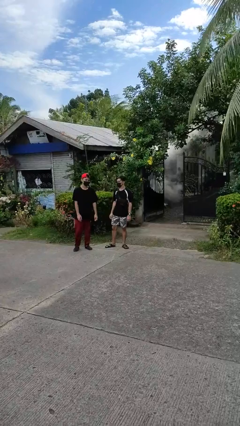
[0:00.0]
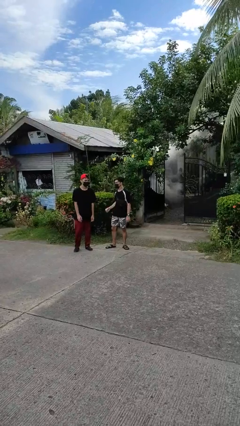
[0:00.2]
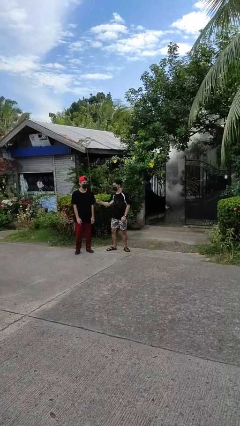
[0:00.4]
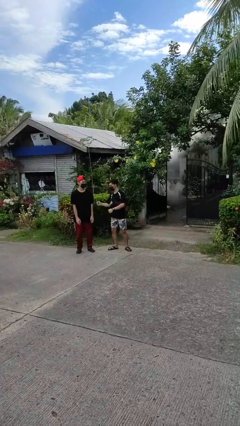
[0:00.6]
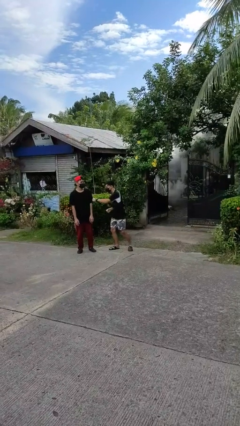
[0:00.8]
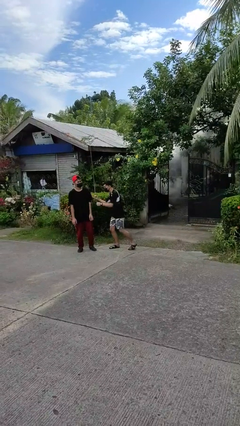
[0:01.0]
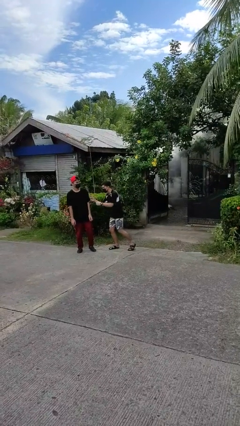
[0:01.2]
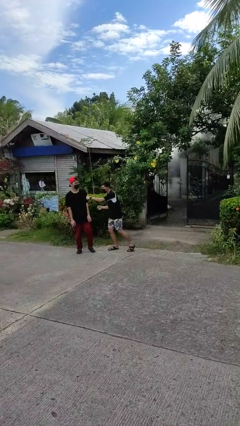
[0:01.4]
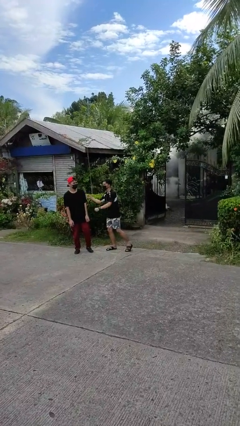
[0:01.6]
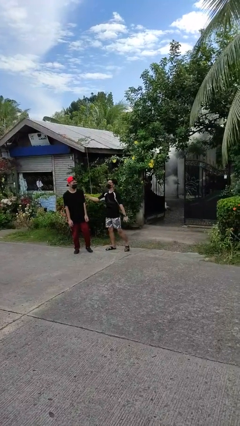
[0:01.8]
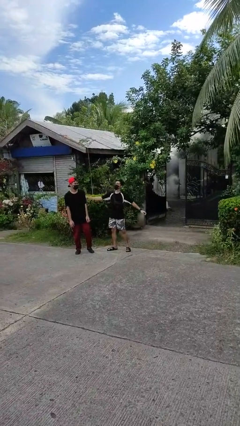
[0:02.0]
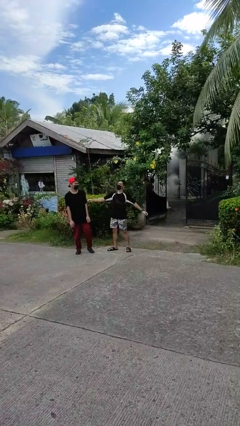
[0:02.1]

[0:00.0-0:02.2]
person pounds shoulders of person

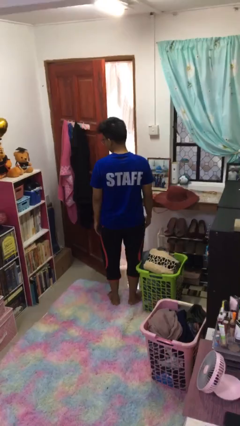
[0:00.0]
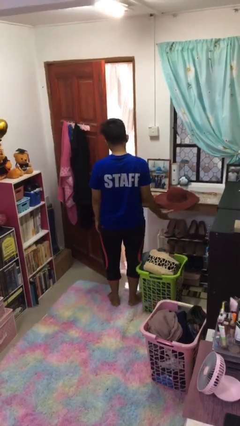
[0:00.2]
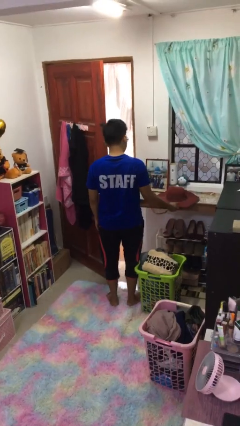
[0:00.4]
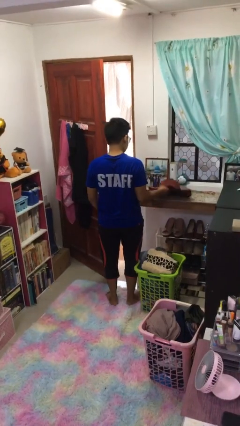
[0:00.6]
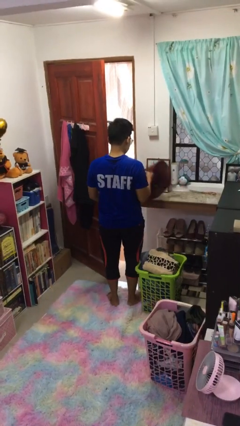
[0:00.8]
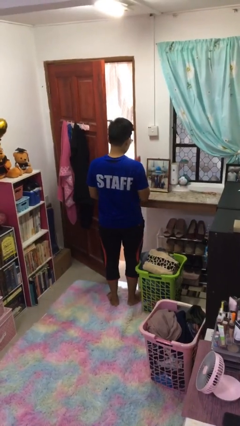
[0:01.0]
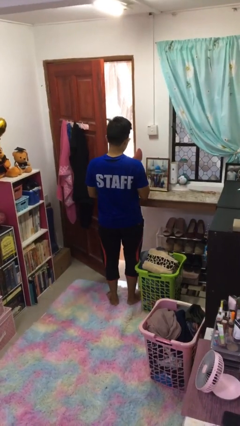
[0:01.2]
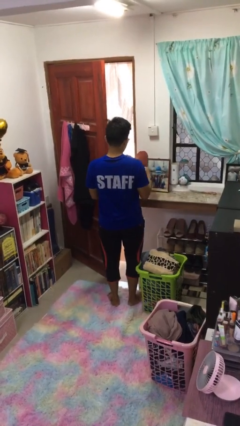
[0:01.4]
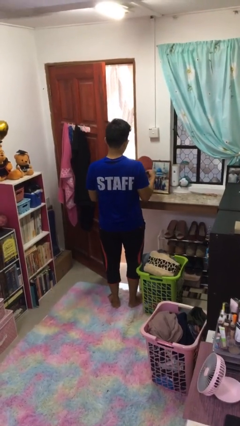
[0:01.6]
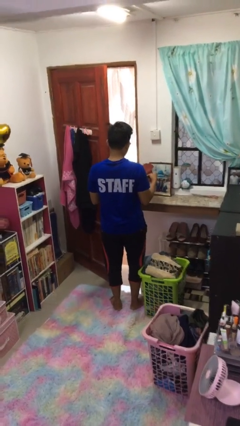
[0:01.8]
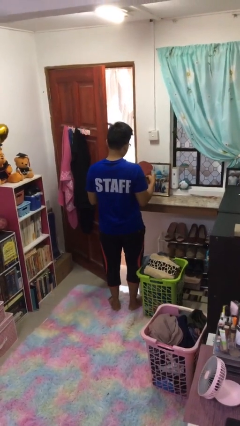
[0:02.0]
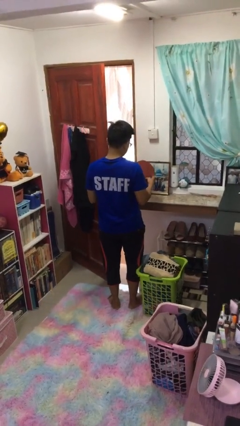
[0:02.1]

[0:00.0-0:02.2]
person picks up object from countertop

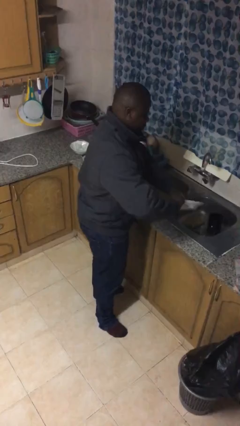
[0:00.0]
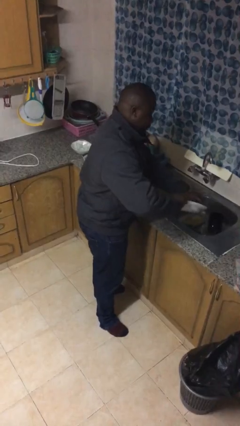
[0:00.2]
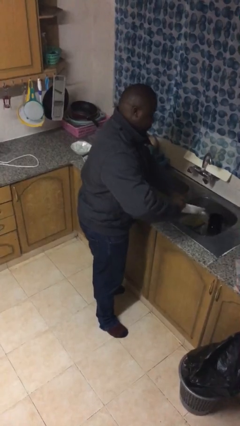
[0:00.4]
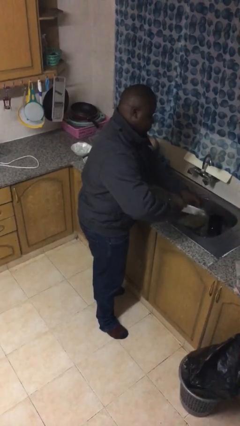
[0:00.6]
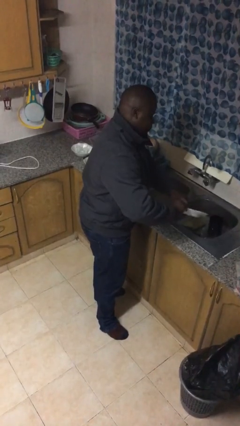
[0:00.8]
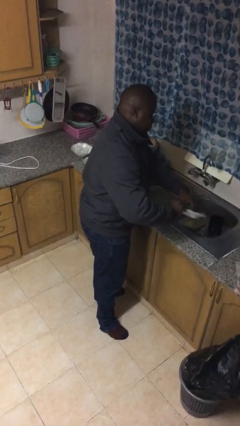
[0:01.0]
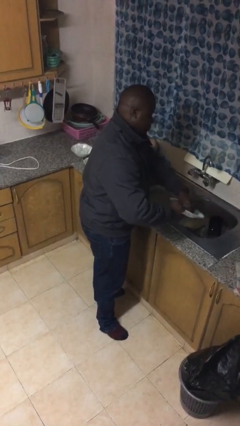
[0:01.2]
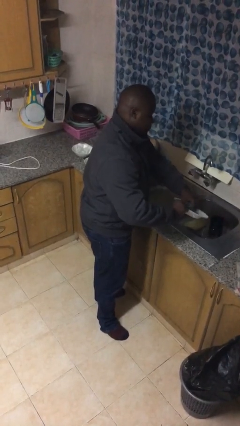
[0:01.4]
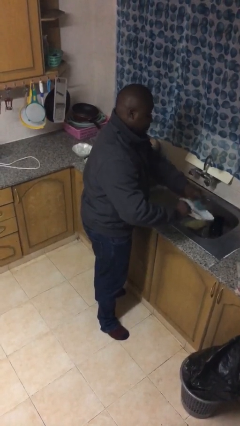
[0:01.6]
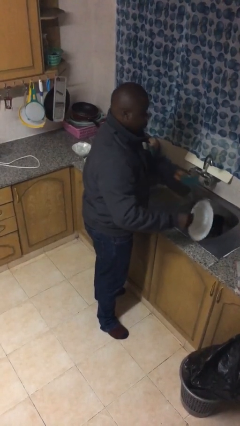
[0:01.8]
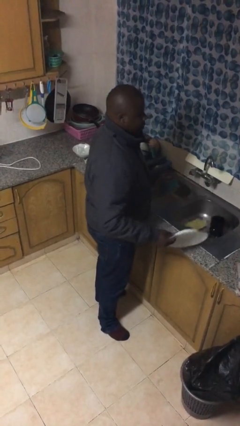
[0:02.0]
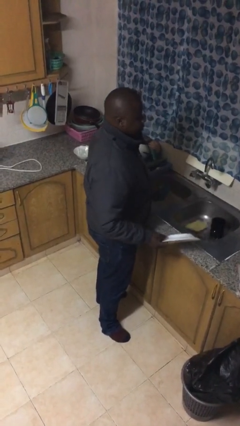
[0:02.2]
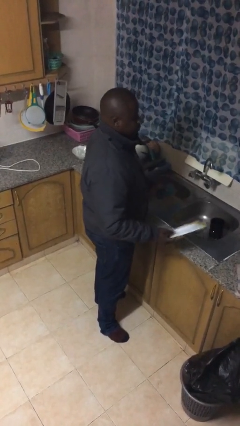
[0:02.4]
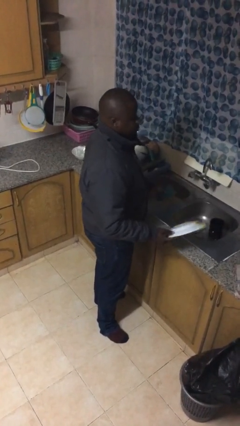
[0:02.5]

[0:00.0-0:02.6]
person washes dish

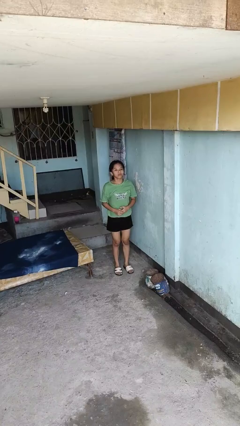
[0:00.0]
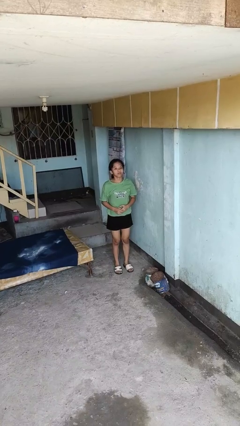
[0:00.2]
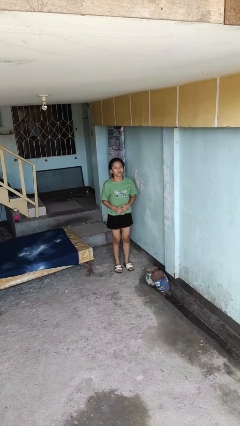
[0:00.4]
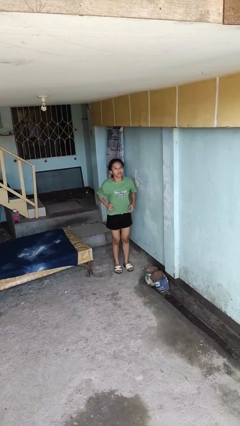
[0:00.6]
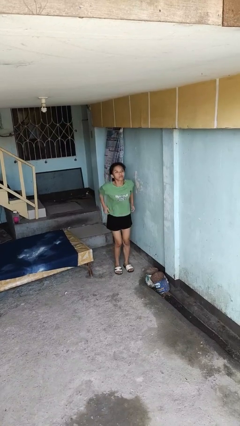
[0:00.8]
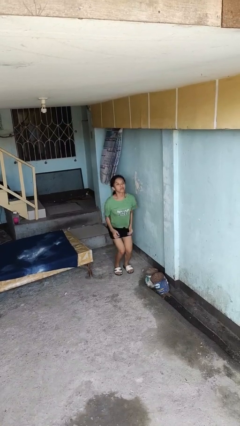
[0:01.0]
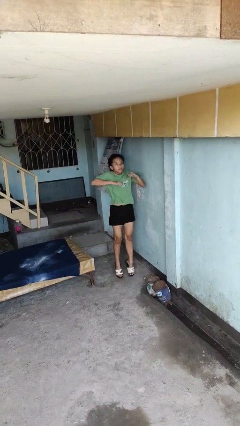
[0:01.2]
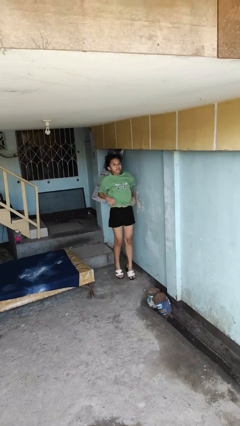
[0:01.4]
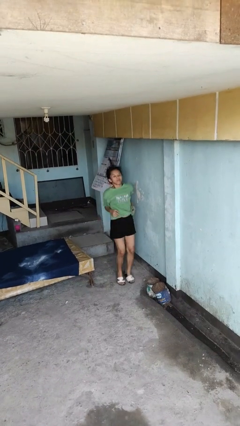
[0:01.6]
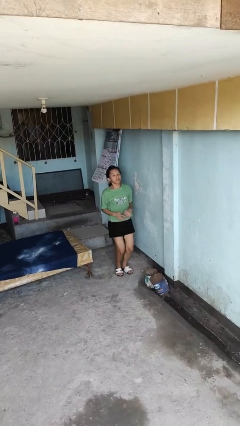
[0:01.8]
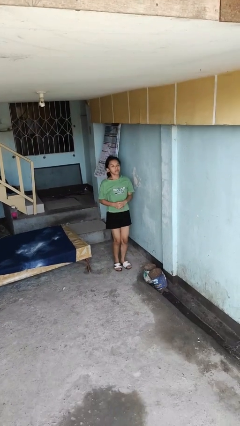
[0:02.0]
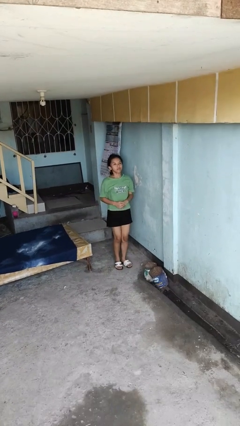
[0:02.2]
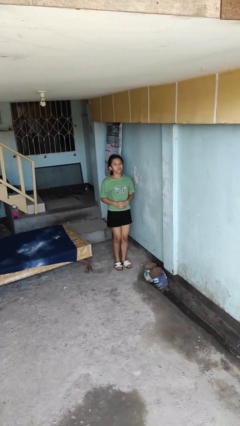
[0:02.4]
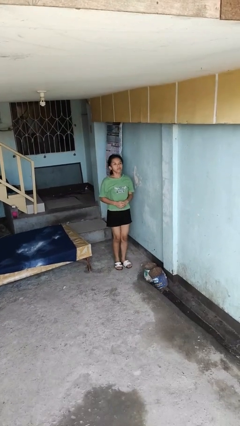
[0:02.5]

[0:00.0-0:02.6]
person jumps

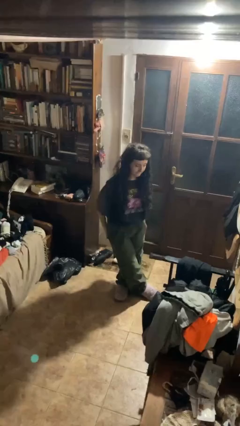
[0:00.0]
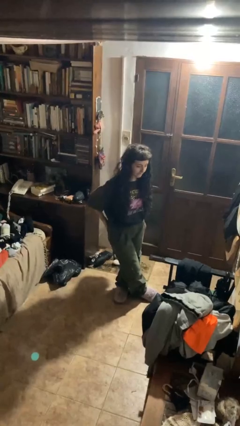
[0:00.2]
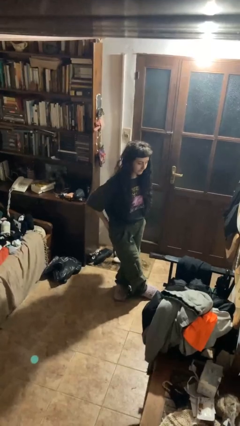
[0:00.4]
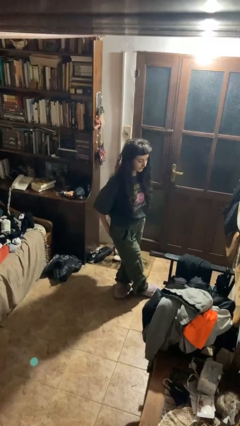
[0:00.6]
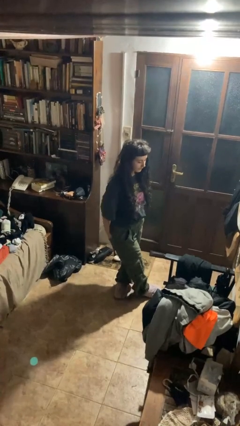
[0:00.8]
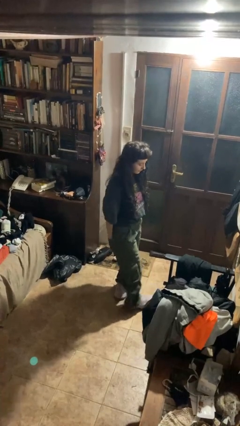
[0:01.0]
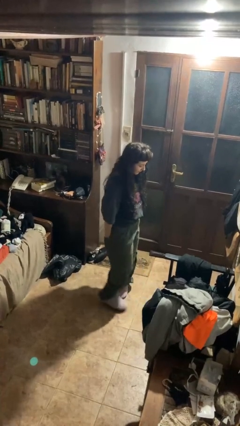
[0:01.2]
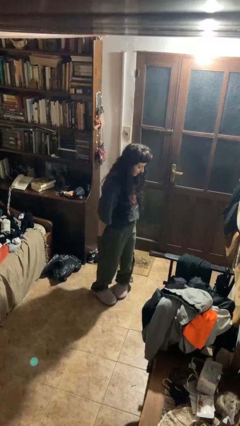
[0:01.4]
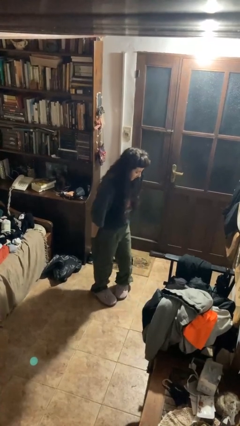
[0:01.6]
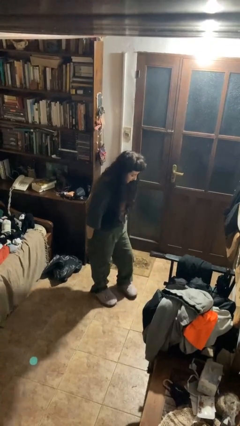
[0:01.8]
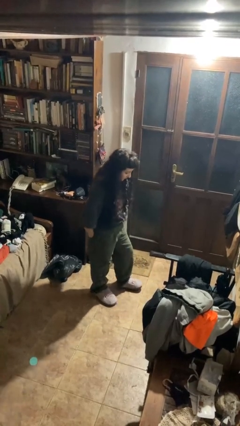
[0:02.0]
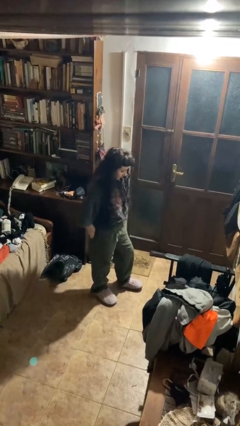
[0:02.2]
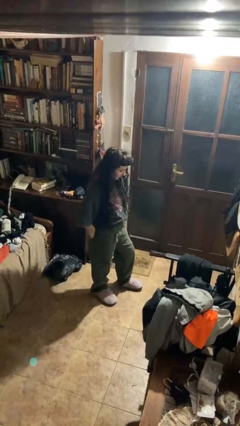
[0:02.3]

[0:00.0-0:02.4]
person puts hands in back pockets

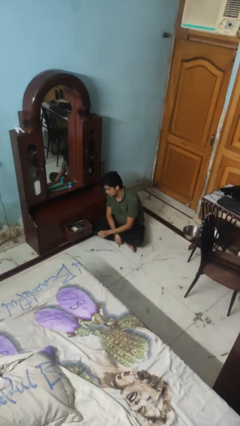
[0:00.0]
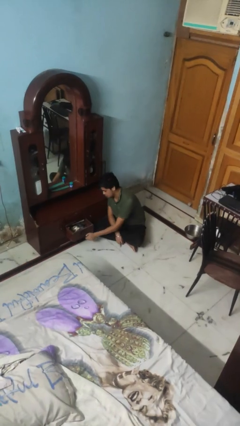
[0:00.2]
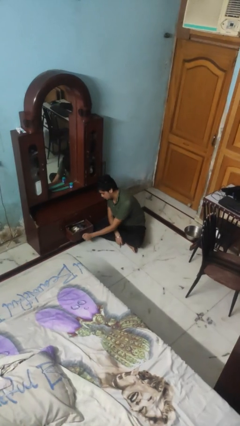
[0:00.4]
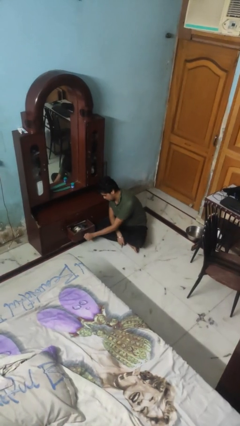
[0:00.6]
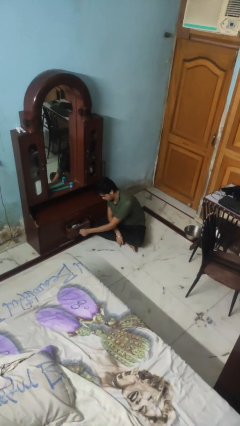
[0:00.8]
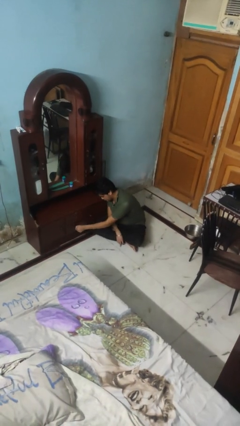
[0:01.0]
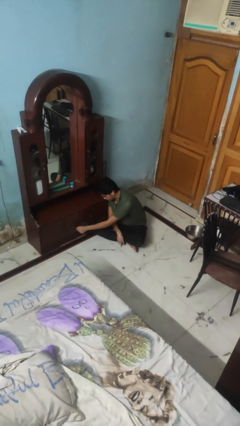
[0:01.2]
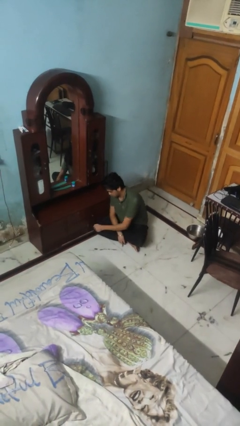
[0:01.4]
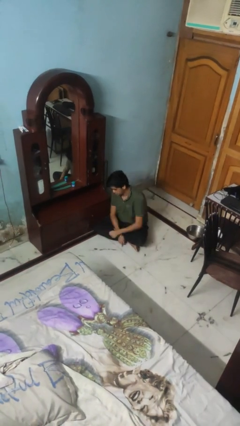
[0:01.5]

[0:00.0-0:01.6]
person closes dresser drawer

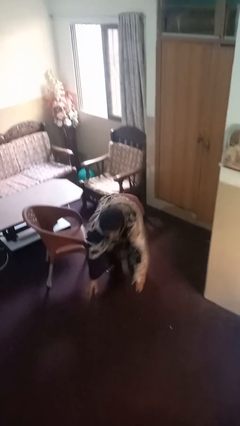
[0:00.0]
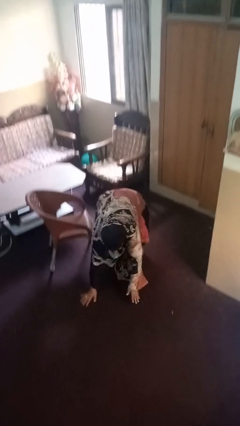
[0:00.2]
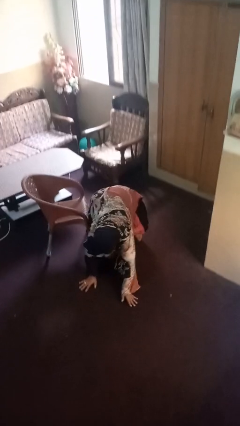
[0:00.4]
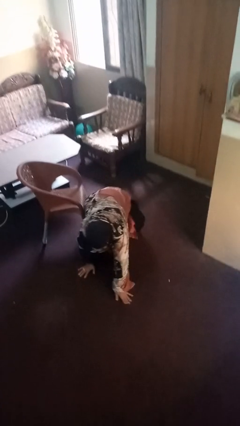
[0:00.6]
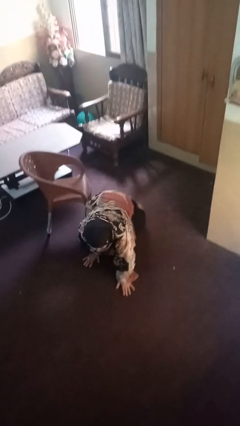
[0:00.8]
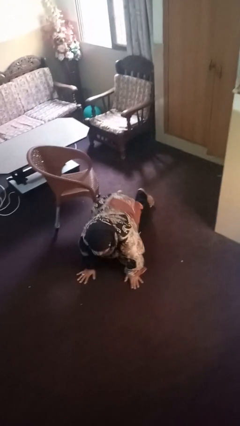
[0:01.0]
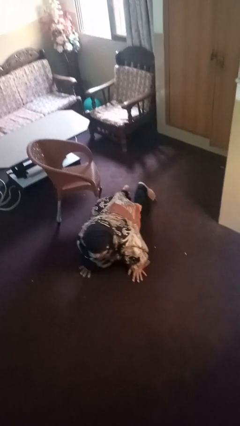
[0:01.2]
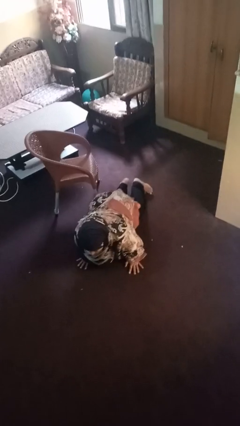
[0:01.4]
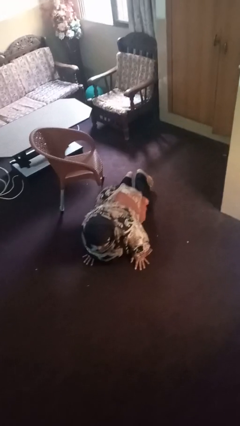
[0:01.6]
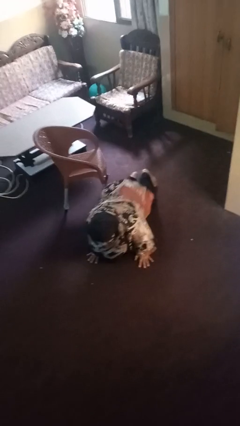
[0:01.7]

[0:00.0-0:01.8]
person lies down on floor

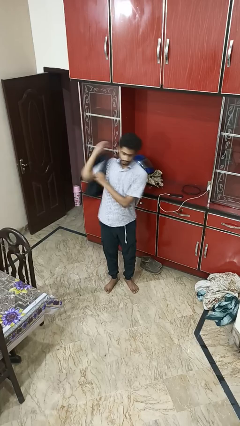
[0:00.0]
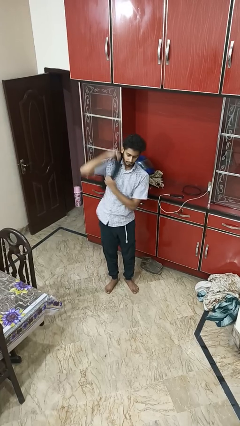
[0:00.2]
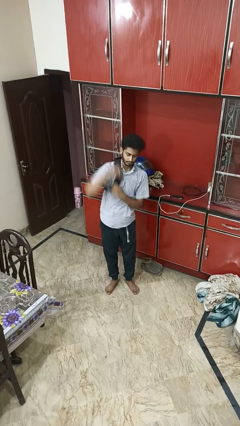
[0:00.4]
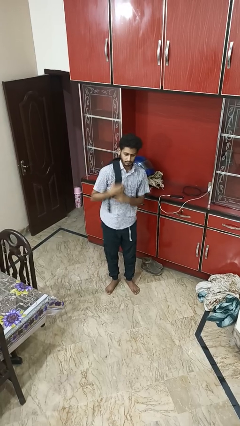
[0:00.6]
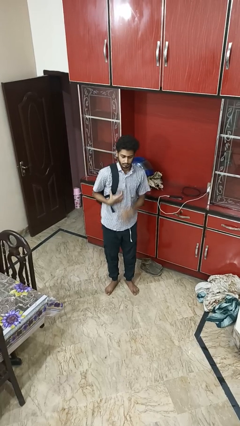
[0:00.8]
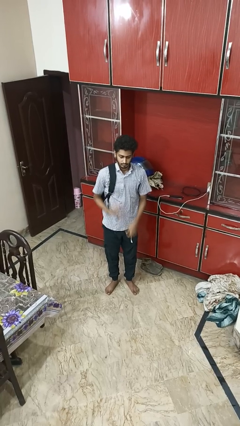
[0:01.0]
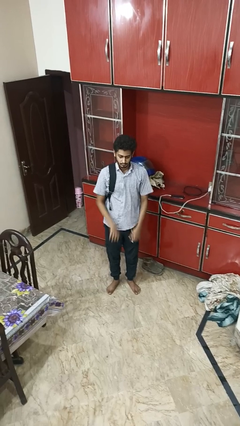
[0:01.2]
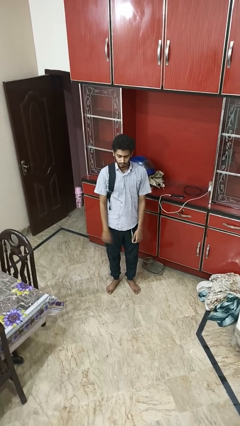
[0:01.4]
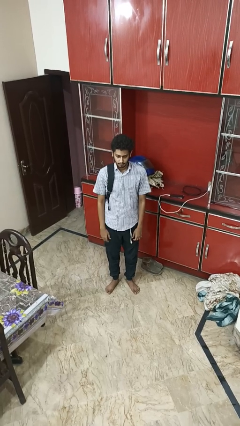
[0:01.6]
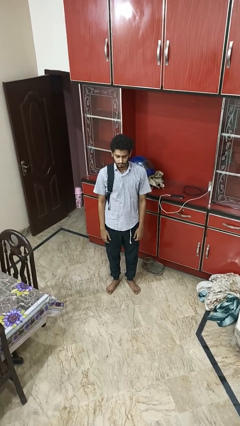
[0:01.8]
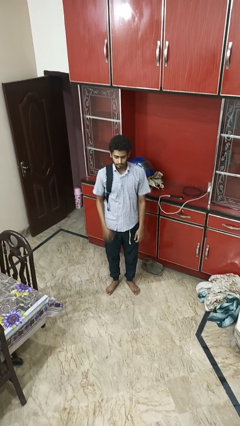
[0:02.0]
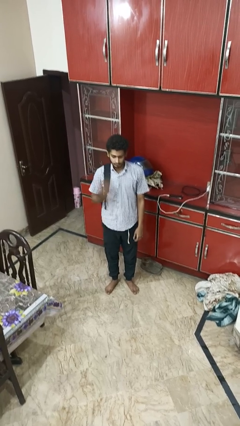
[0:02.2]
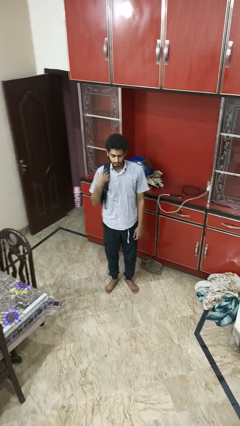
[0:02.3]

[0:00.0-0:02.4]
person puts on backpack
